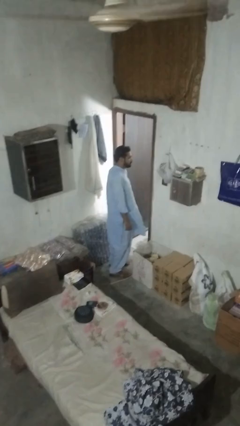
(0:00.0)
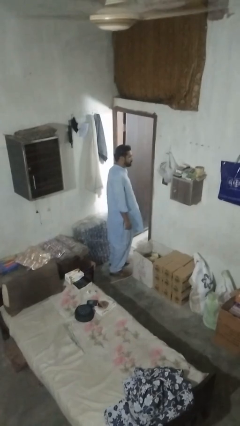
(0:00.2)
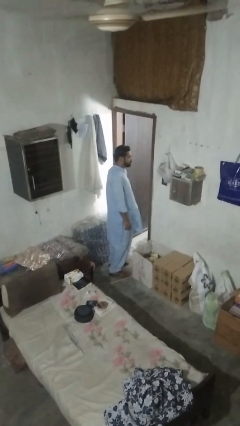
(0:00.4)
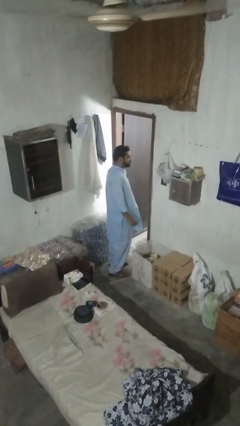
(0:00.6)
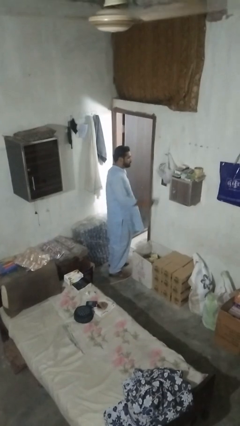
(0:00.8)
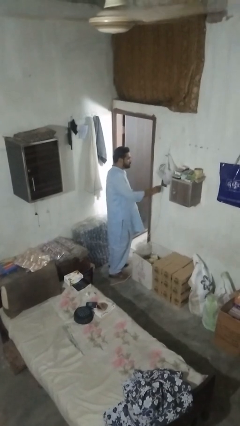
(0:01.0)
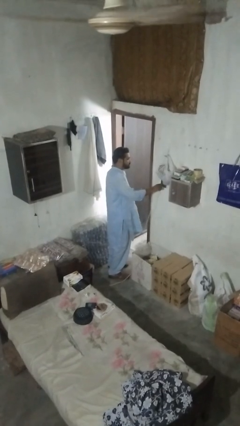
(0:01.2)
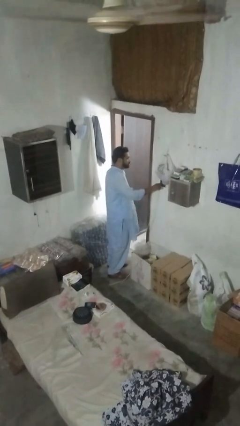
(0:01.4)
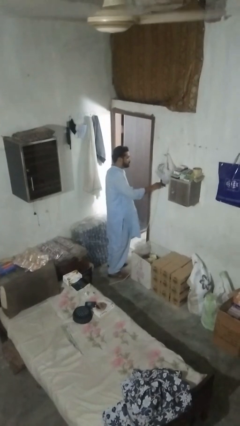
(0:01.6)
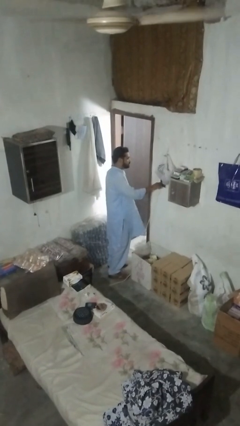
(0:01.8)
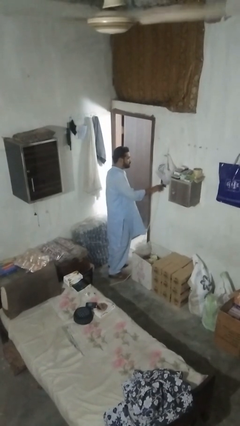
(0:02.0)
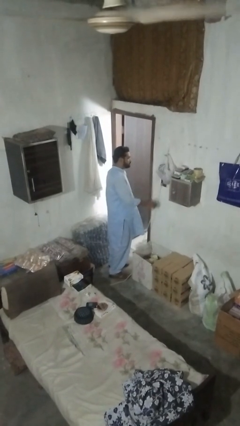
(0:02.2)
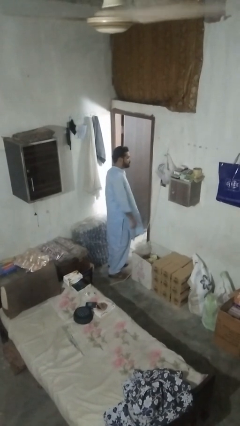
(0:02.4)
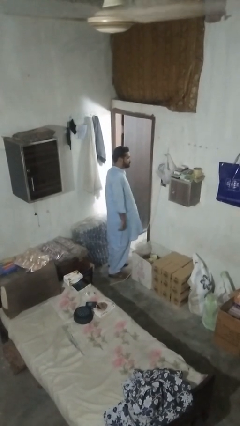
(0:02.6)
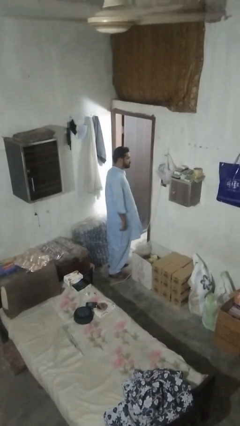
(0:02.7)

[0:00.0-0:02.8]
person plugs into electrical socket

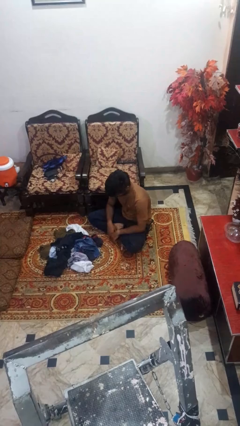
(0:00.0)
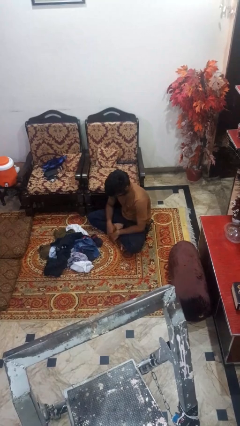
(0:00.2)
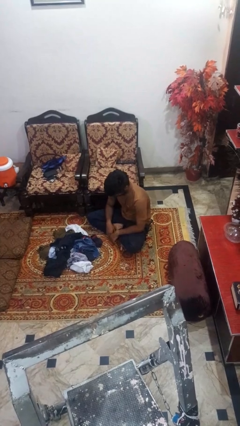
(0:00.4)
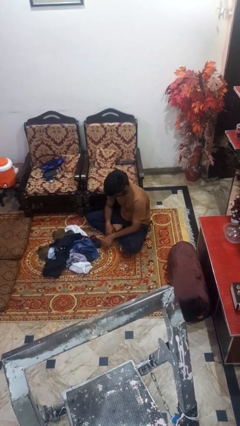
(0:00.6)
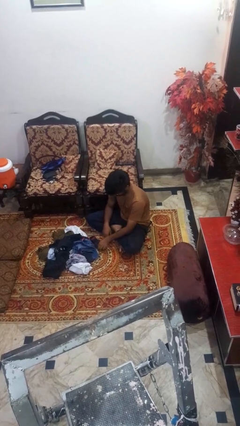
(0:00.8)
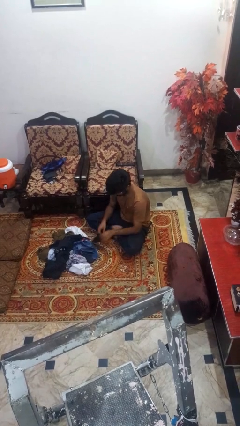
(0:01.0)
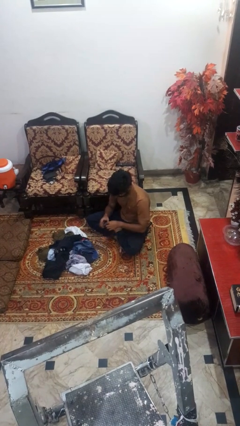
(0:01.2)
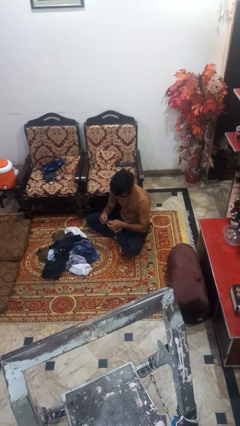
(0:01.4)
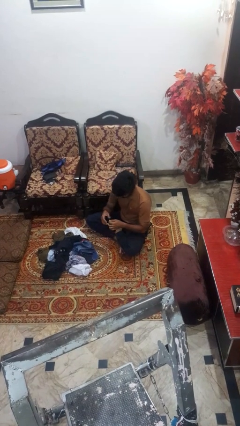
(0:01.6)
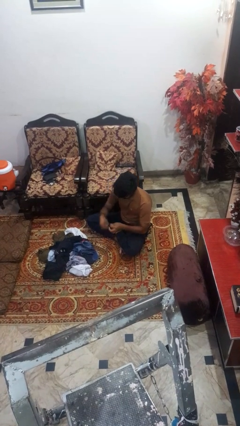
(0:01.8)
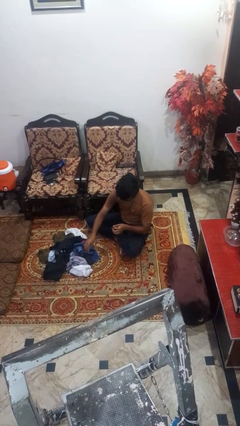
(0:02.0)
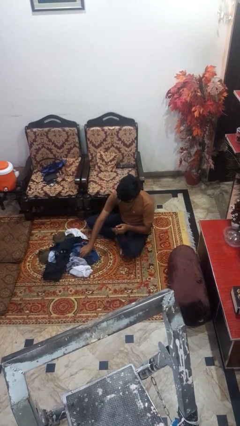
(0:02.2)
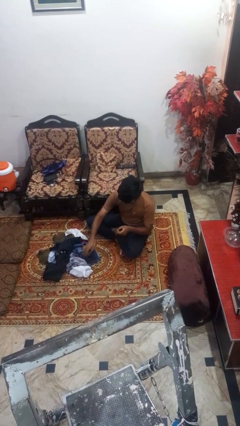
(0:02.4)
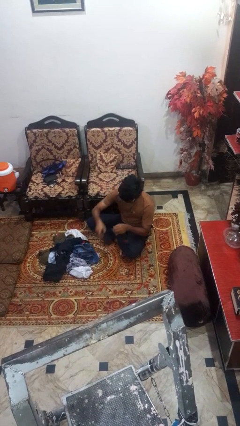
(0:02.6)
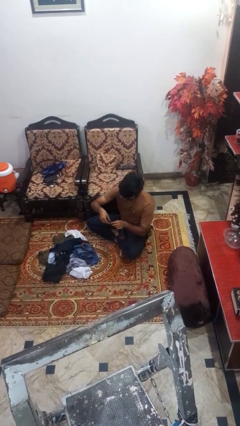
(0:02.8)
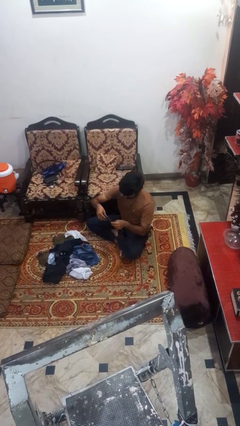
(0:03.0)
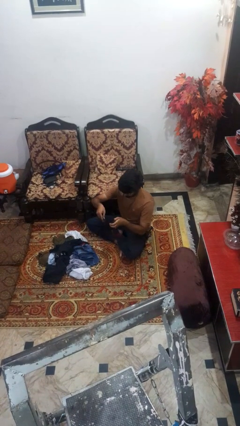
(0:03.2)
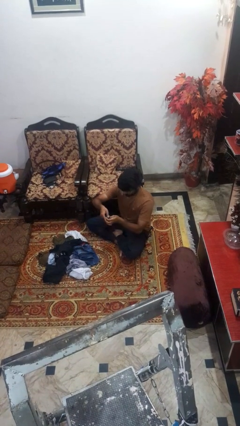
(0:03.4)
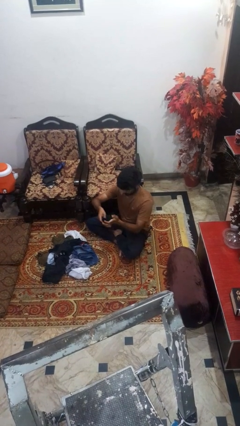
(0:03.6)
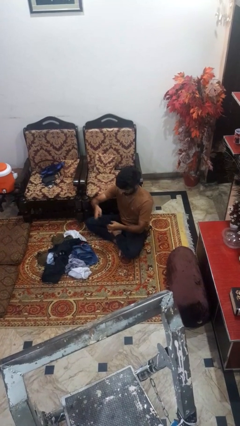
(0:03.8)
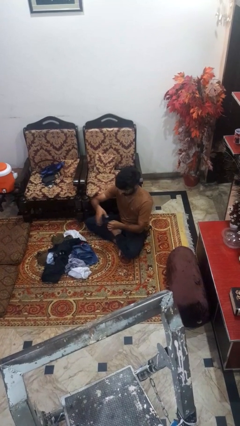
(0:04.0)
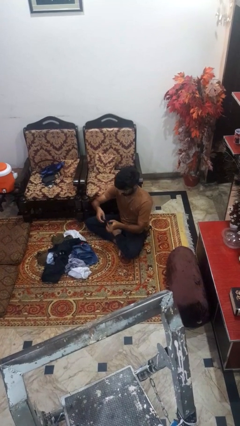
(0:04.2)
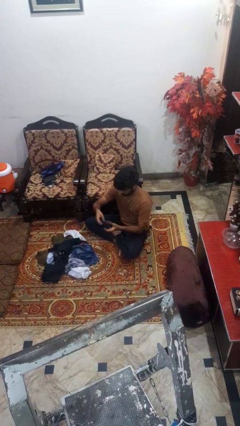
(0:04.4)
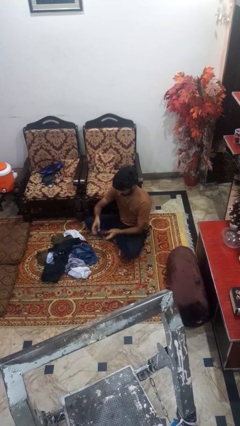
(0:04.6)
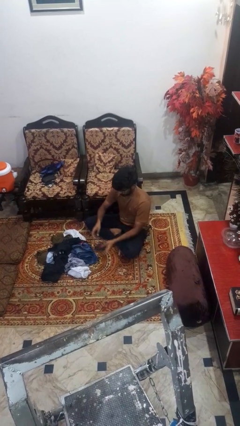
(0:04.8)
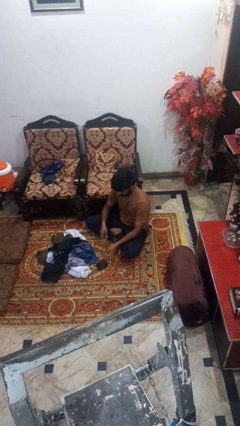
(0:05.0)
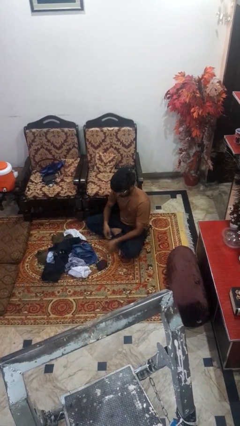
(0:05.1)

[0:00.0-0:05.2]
person folds socks

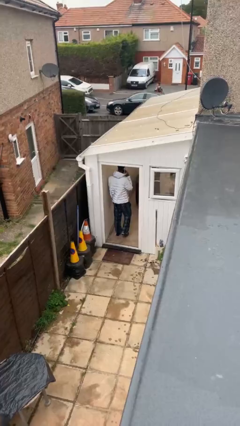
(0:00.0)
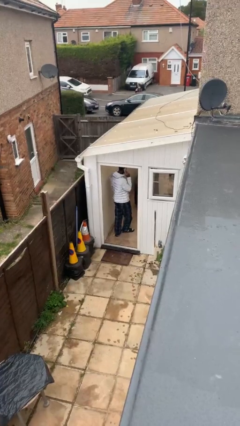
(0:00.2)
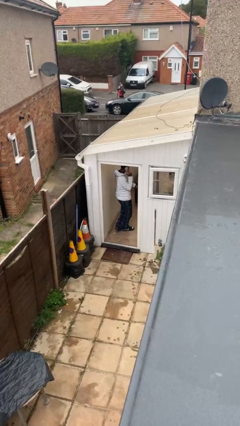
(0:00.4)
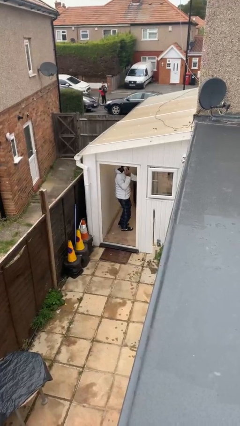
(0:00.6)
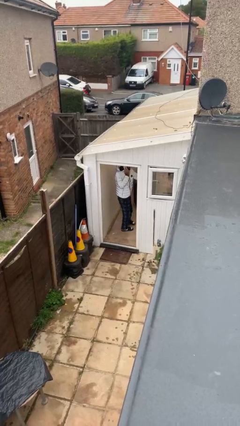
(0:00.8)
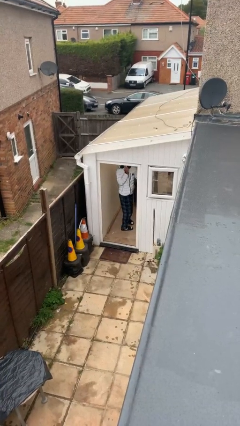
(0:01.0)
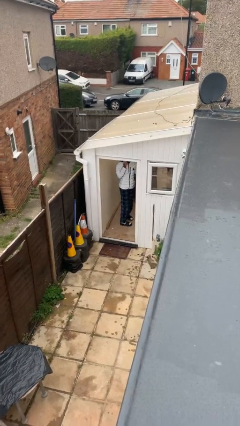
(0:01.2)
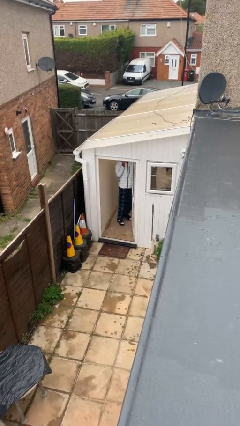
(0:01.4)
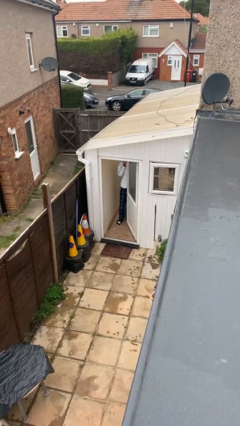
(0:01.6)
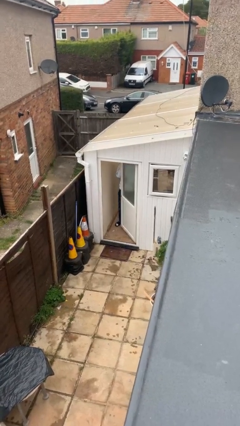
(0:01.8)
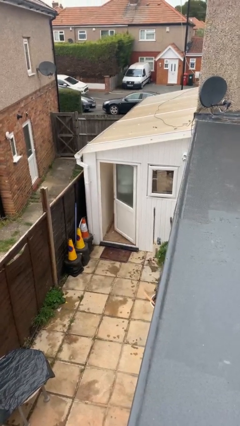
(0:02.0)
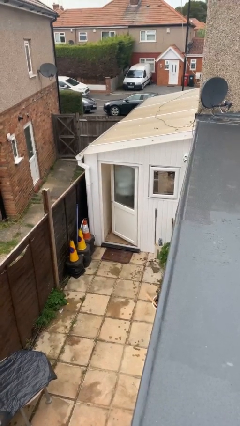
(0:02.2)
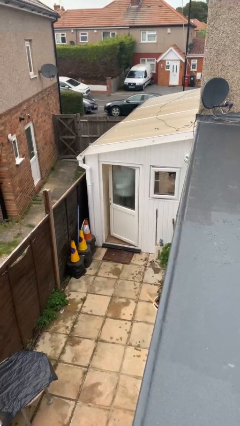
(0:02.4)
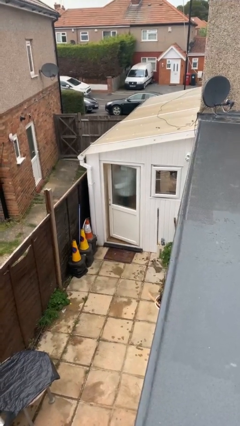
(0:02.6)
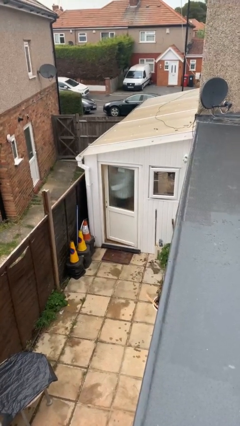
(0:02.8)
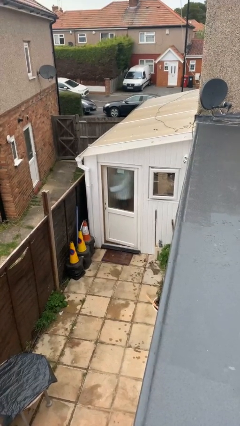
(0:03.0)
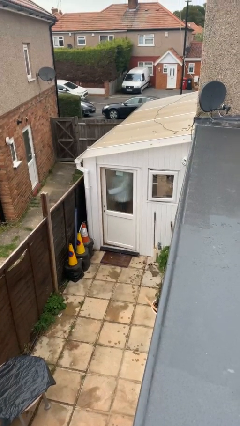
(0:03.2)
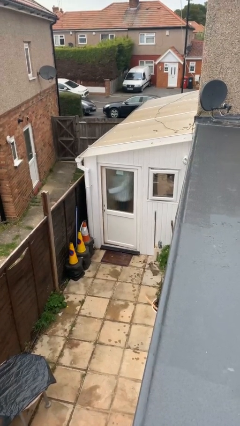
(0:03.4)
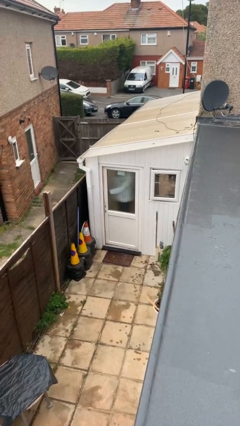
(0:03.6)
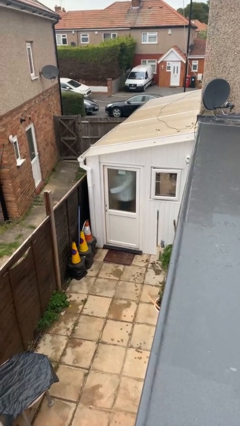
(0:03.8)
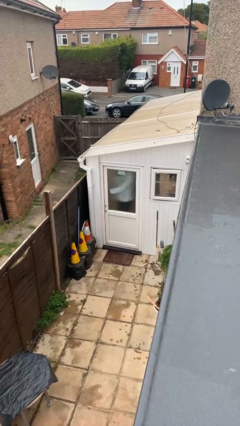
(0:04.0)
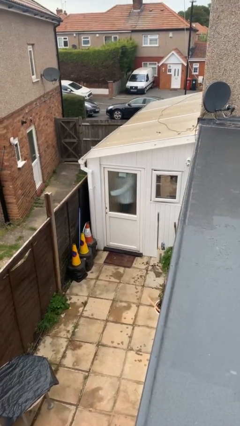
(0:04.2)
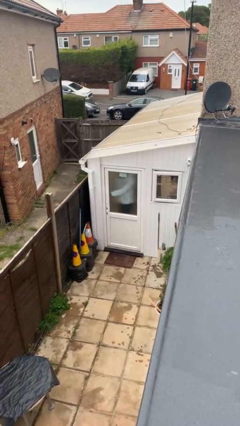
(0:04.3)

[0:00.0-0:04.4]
person closes facility door

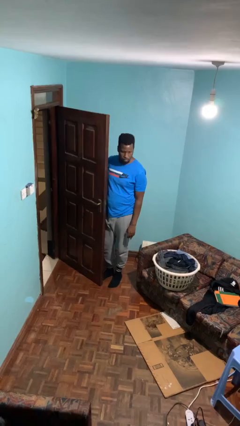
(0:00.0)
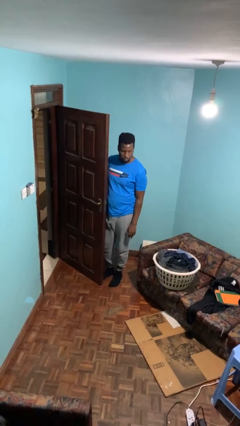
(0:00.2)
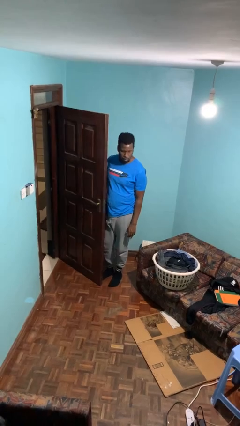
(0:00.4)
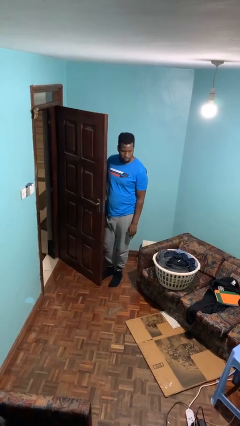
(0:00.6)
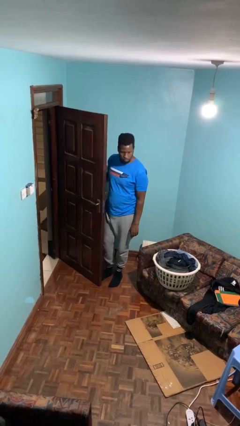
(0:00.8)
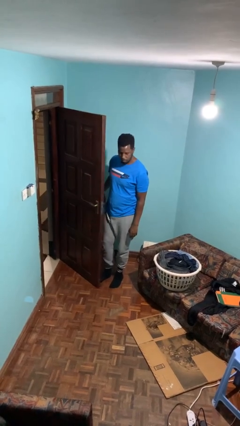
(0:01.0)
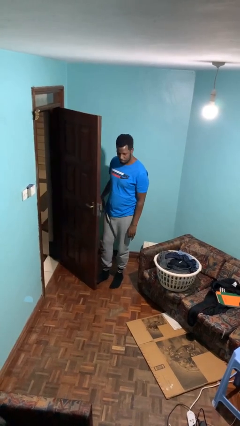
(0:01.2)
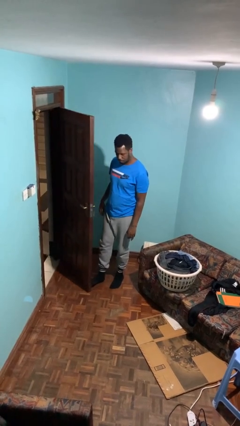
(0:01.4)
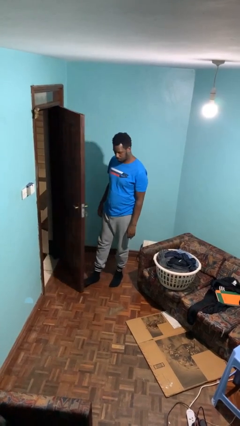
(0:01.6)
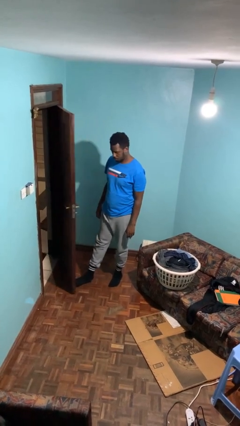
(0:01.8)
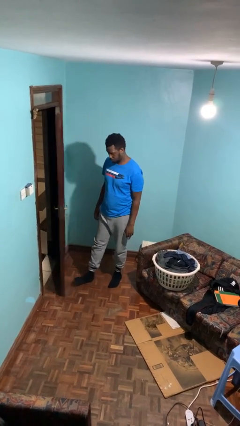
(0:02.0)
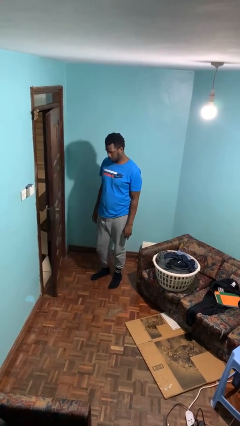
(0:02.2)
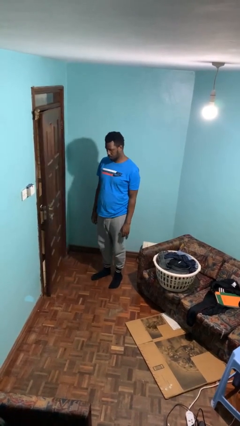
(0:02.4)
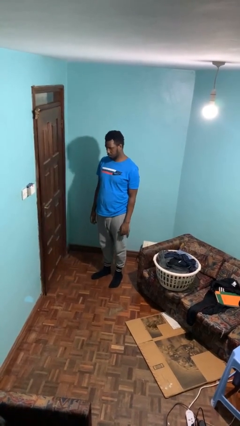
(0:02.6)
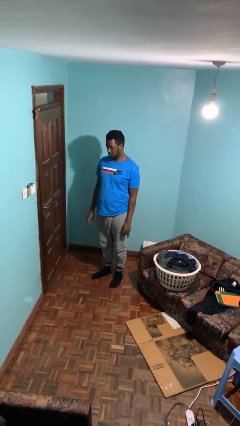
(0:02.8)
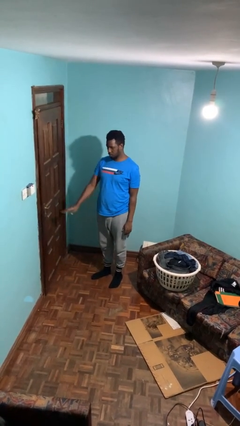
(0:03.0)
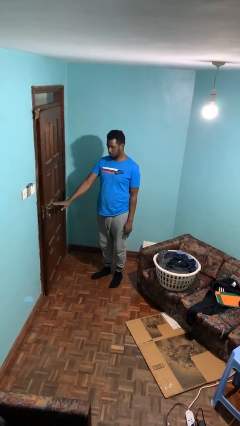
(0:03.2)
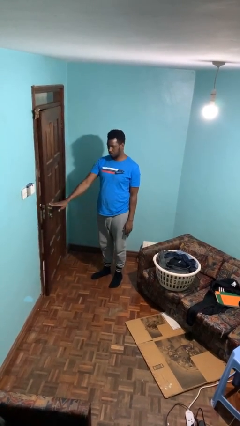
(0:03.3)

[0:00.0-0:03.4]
person closes door with foot

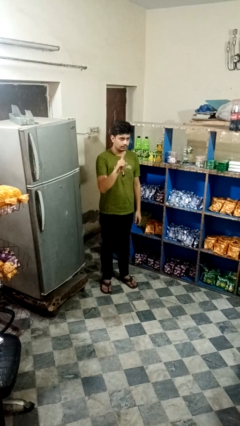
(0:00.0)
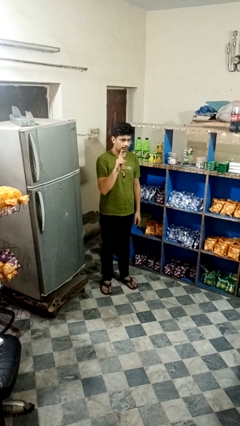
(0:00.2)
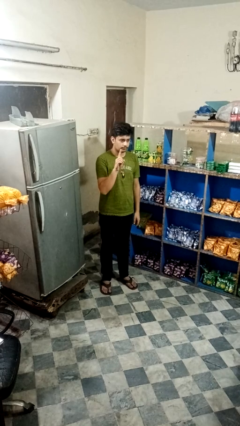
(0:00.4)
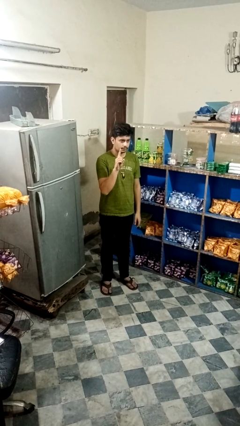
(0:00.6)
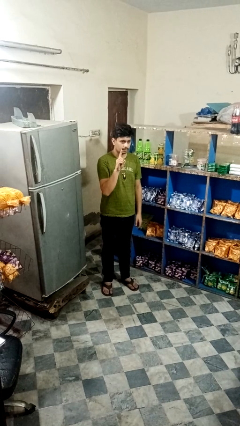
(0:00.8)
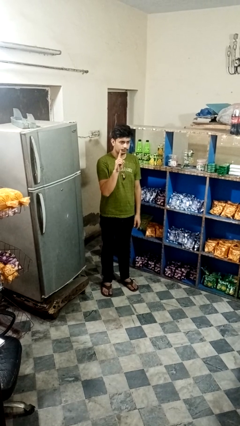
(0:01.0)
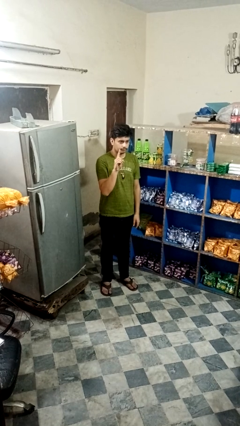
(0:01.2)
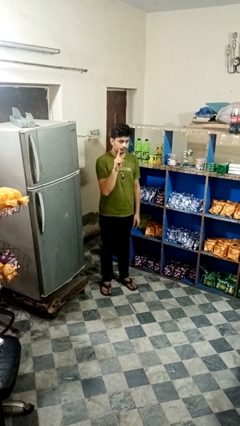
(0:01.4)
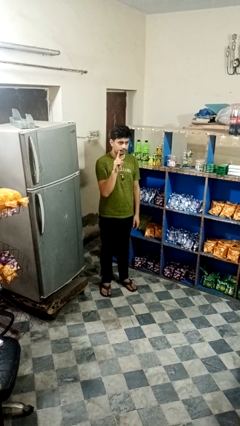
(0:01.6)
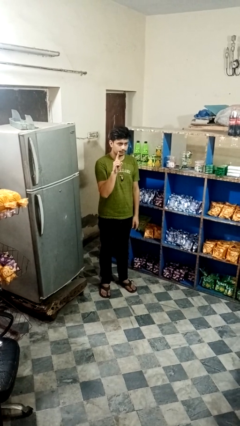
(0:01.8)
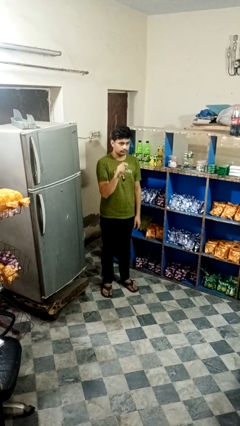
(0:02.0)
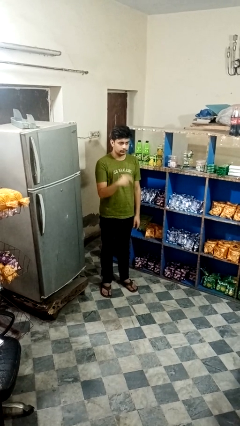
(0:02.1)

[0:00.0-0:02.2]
person gestures number one
